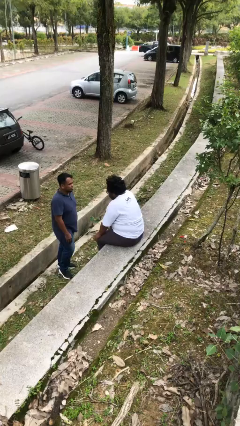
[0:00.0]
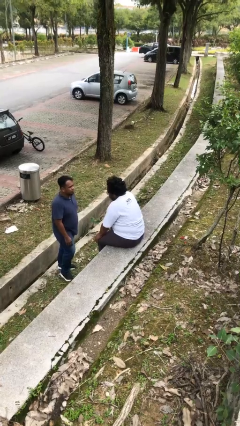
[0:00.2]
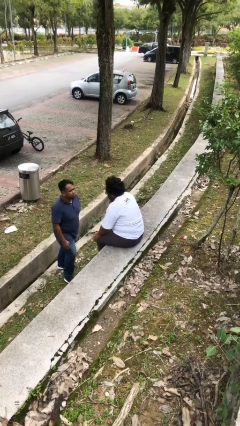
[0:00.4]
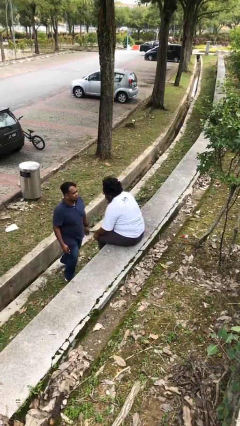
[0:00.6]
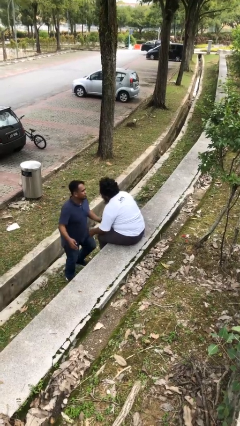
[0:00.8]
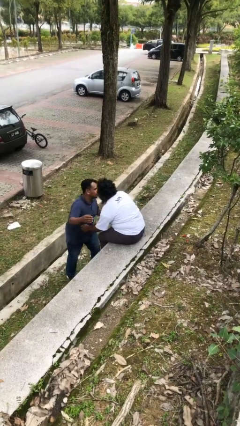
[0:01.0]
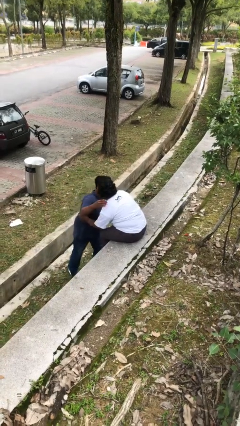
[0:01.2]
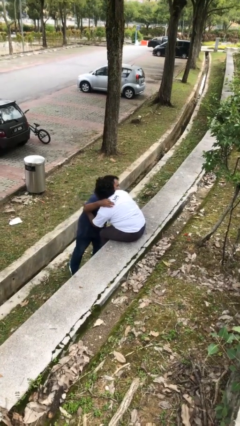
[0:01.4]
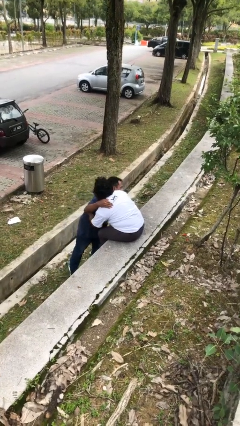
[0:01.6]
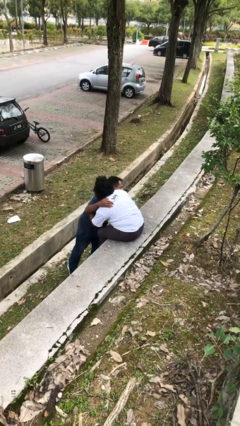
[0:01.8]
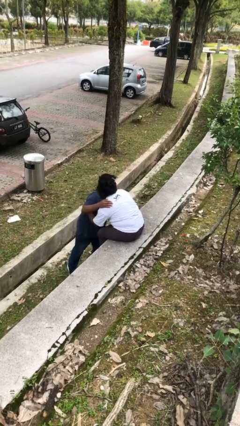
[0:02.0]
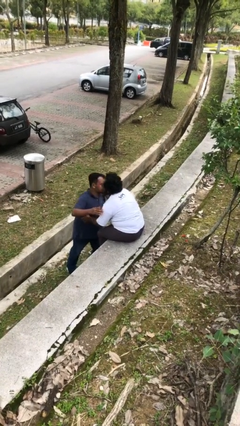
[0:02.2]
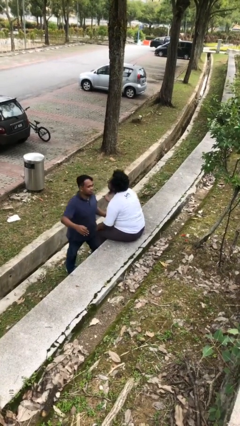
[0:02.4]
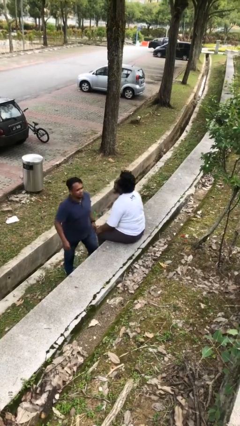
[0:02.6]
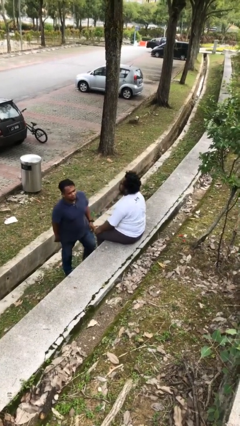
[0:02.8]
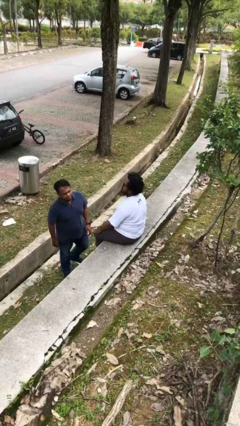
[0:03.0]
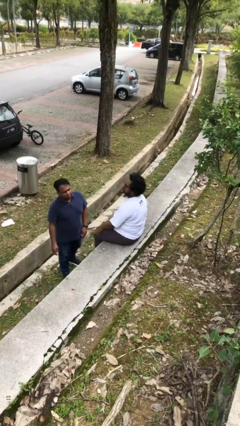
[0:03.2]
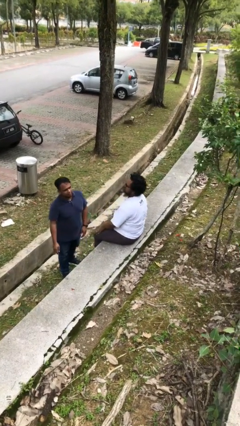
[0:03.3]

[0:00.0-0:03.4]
person embraces person

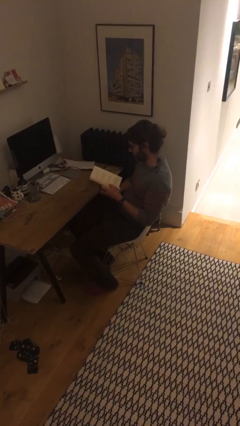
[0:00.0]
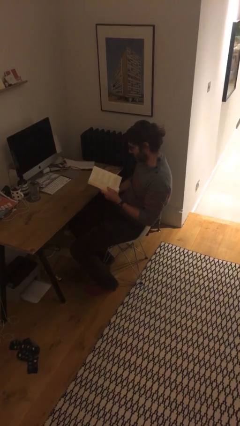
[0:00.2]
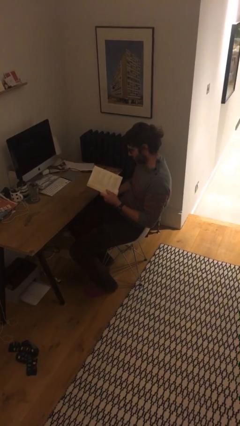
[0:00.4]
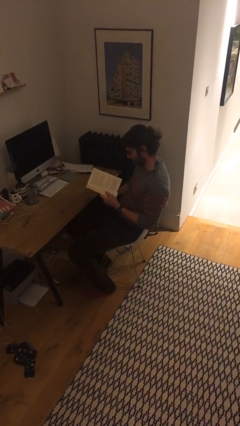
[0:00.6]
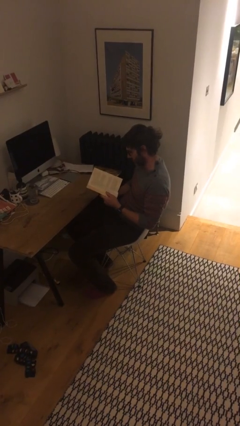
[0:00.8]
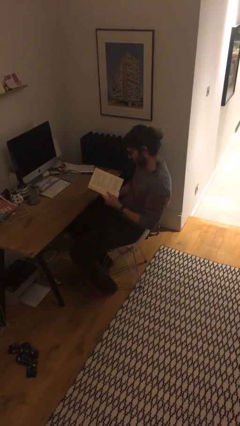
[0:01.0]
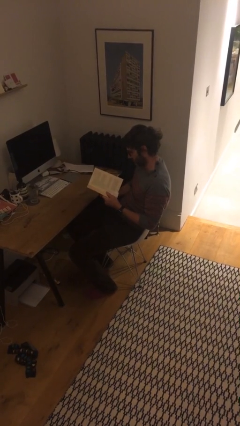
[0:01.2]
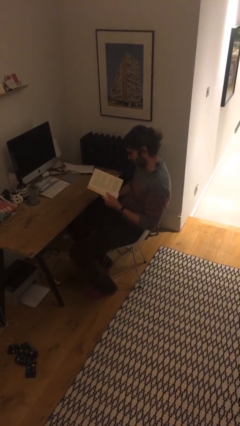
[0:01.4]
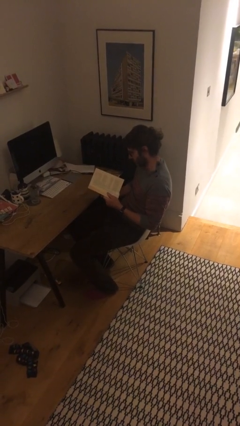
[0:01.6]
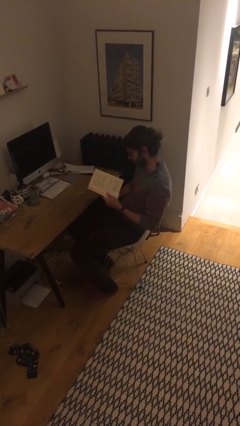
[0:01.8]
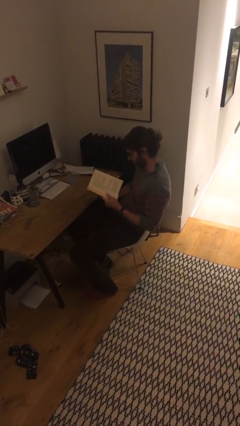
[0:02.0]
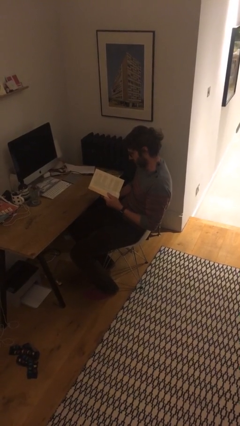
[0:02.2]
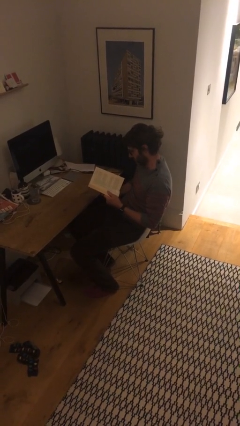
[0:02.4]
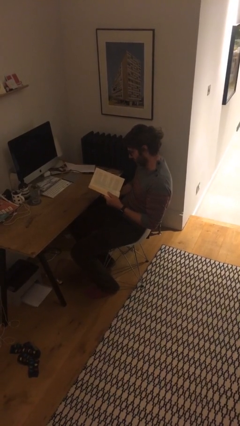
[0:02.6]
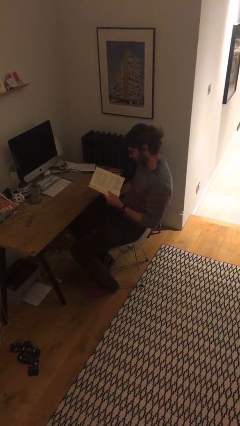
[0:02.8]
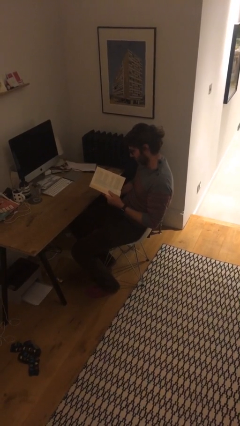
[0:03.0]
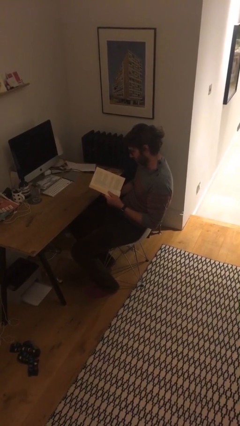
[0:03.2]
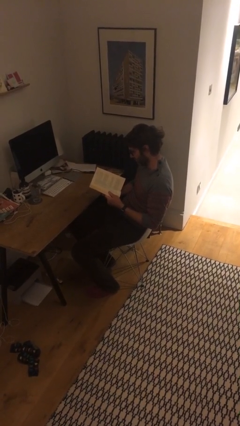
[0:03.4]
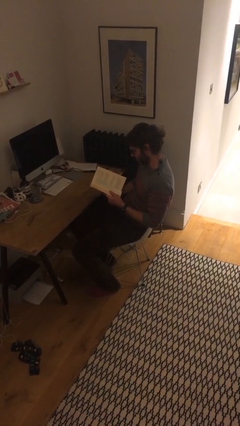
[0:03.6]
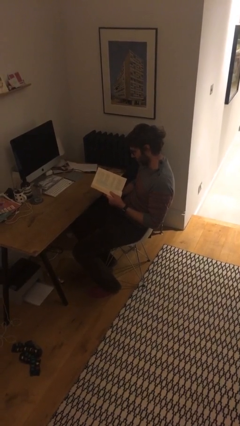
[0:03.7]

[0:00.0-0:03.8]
person reads document

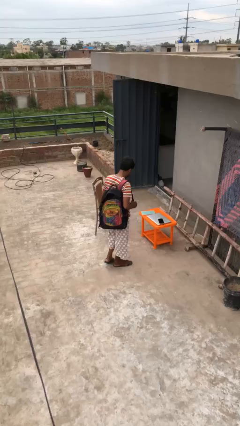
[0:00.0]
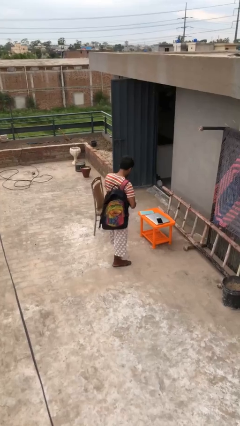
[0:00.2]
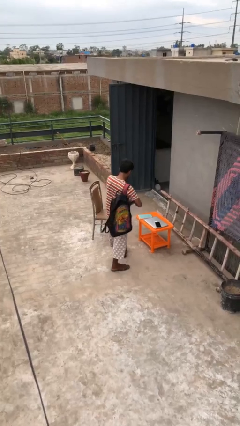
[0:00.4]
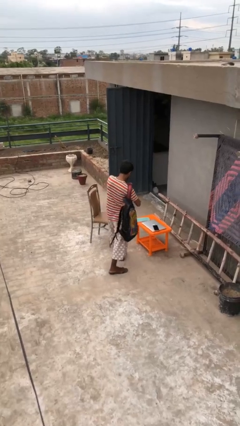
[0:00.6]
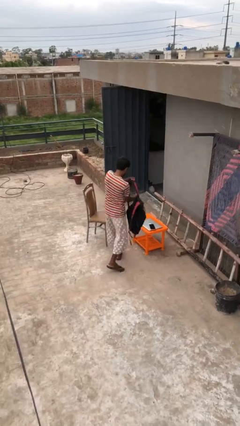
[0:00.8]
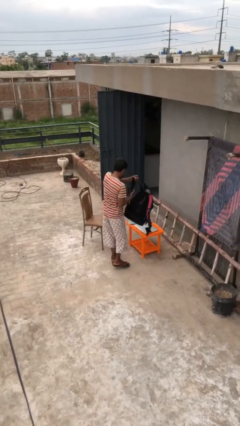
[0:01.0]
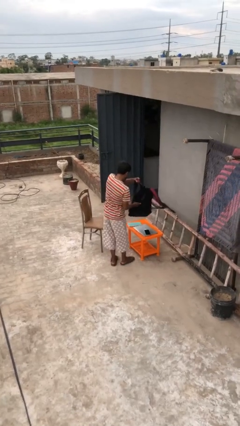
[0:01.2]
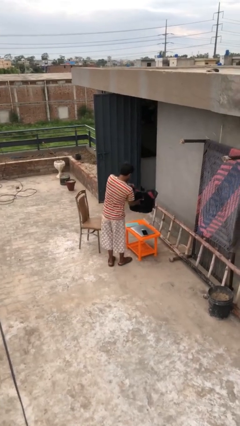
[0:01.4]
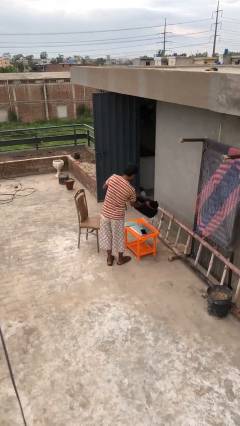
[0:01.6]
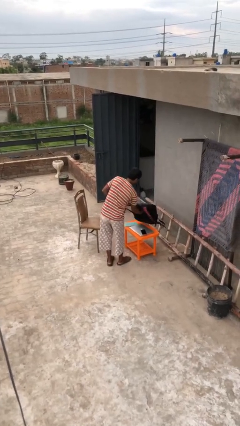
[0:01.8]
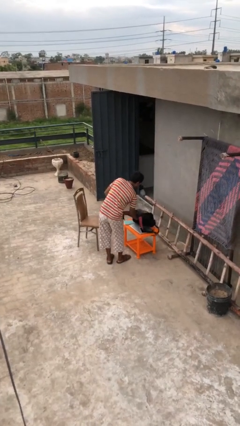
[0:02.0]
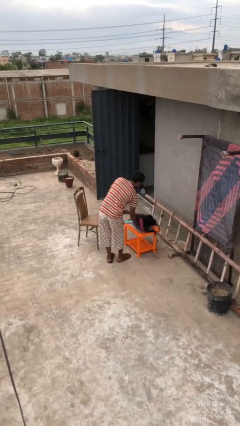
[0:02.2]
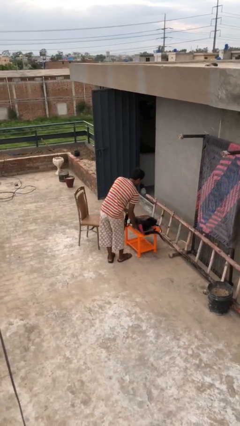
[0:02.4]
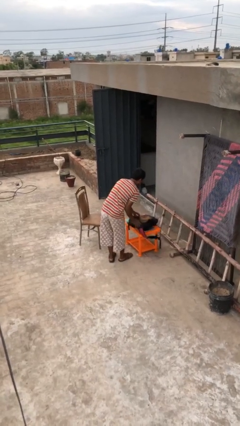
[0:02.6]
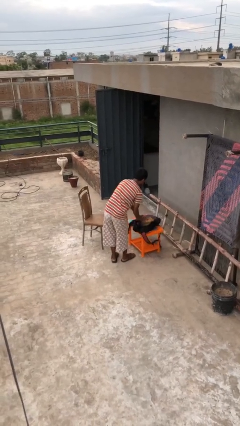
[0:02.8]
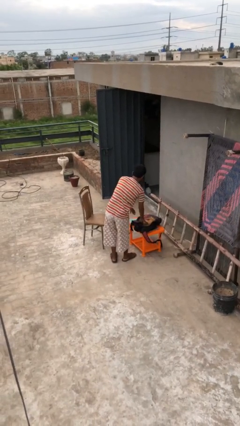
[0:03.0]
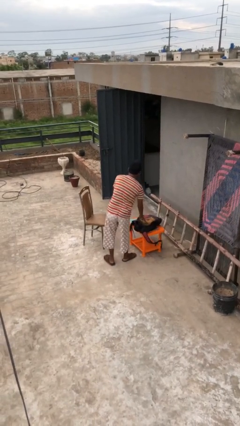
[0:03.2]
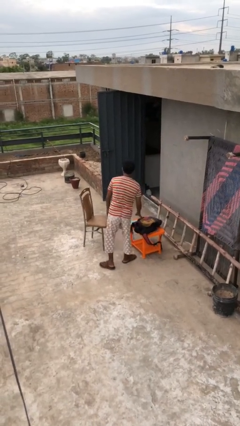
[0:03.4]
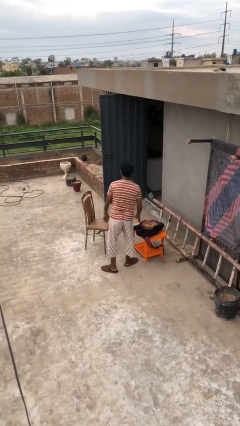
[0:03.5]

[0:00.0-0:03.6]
person puts down object on table

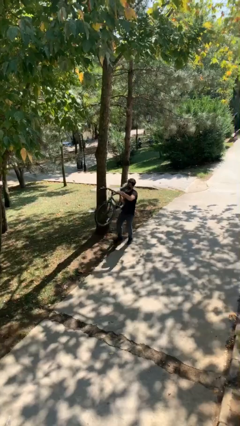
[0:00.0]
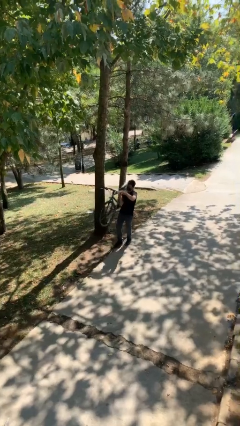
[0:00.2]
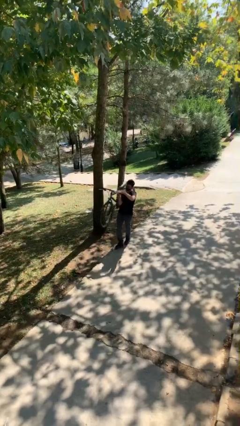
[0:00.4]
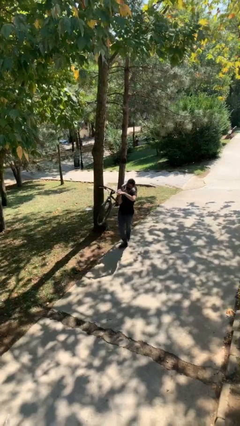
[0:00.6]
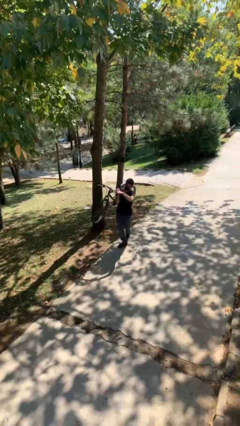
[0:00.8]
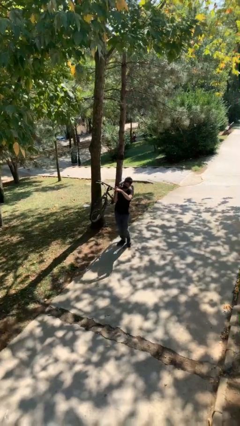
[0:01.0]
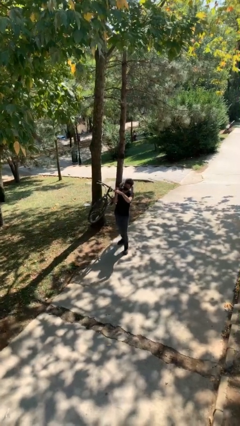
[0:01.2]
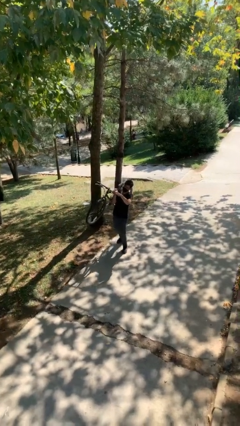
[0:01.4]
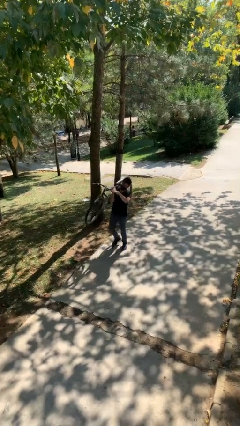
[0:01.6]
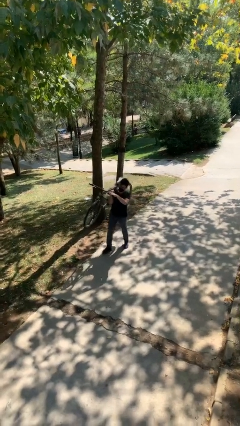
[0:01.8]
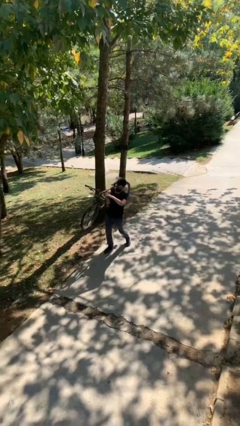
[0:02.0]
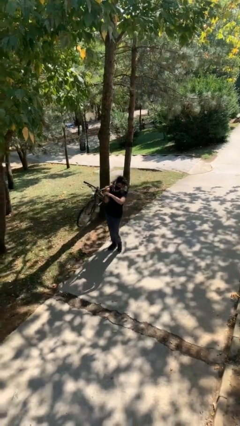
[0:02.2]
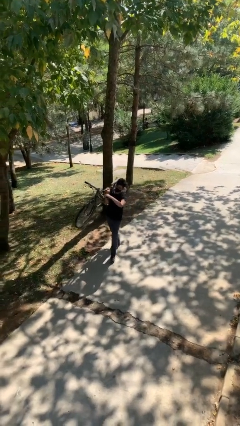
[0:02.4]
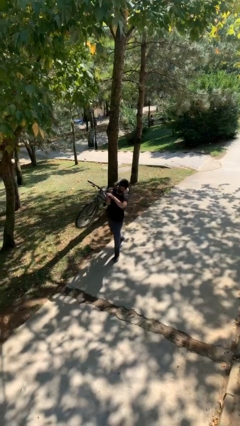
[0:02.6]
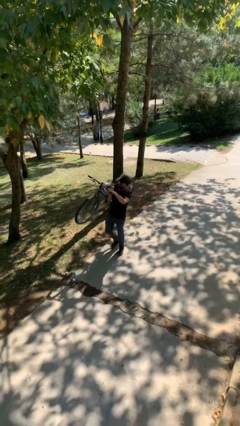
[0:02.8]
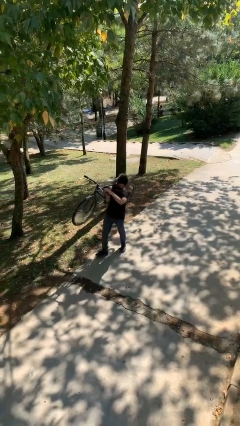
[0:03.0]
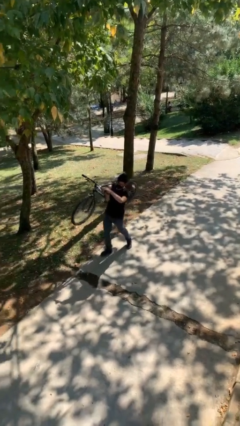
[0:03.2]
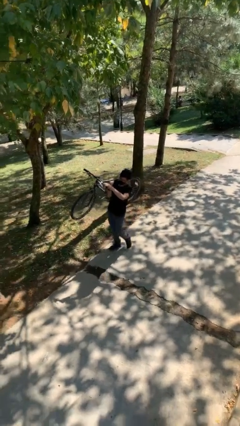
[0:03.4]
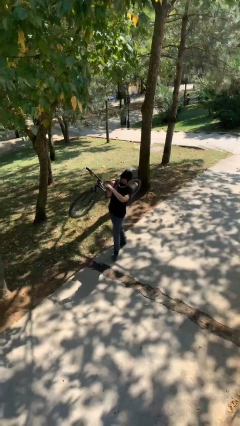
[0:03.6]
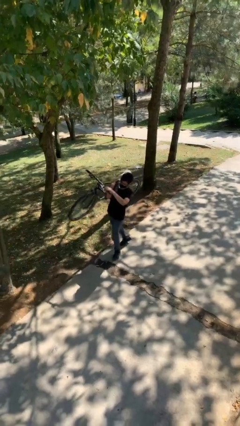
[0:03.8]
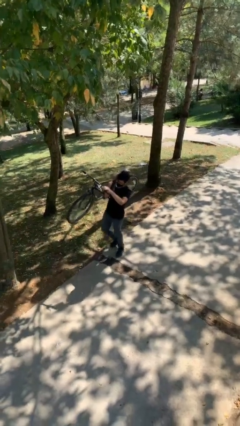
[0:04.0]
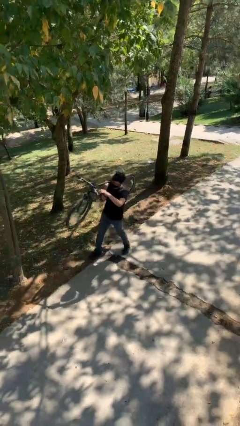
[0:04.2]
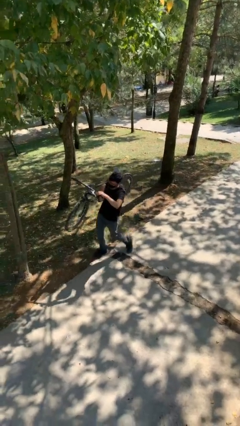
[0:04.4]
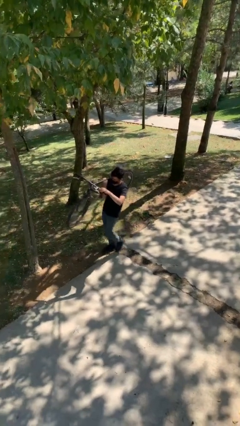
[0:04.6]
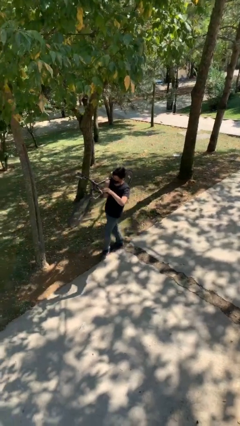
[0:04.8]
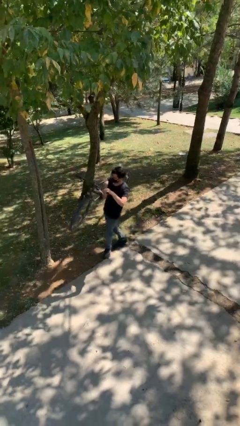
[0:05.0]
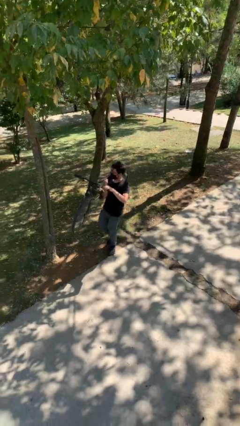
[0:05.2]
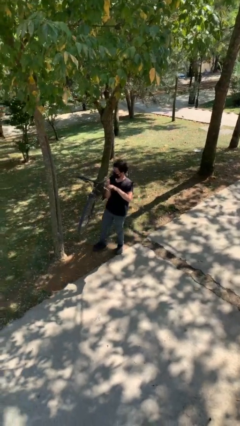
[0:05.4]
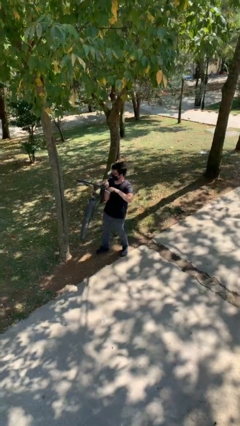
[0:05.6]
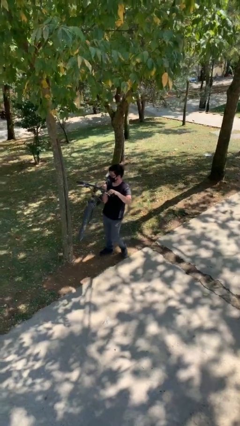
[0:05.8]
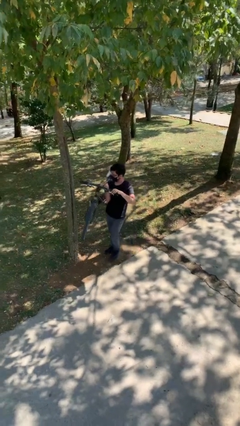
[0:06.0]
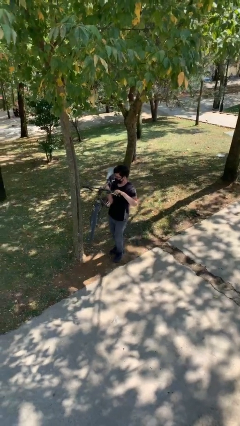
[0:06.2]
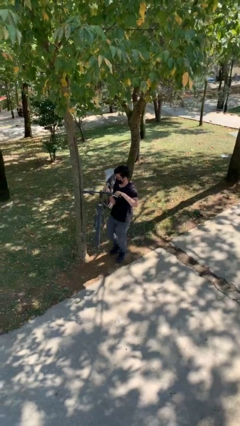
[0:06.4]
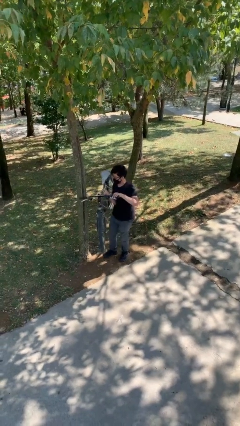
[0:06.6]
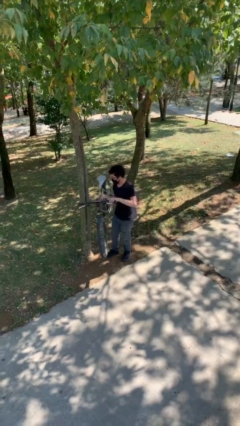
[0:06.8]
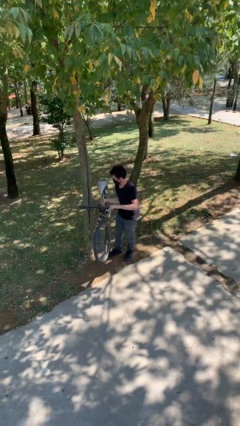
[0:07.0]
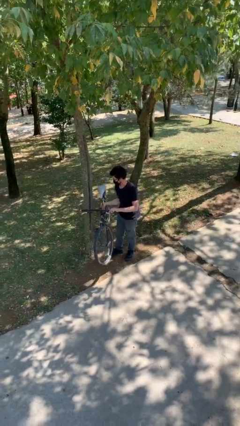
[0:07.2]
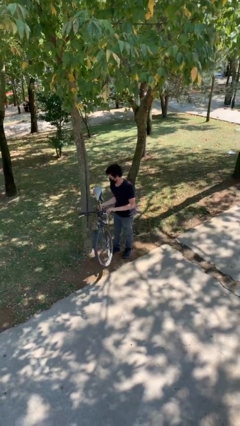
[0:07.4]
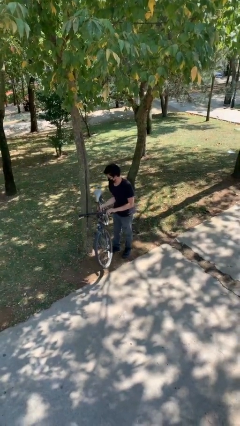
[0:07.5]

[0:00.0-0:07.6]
person carries heavy object
